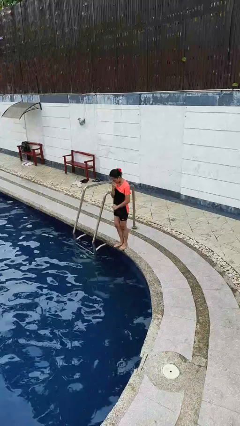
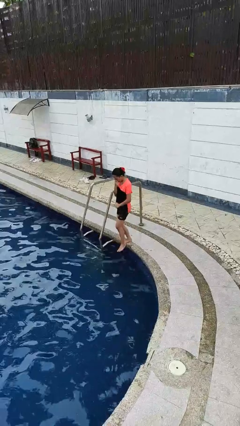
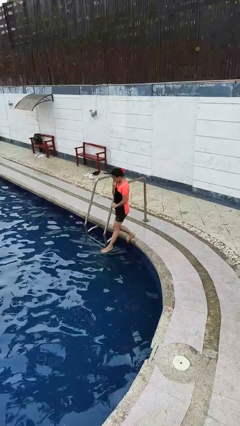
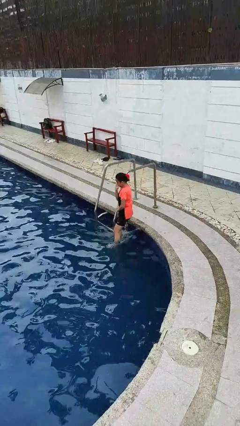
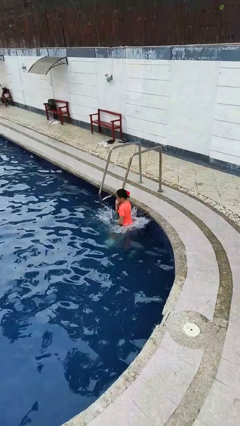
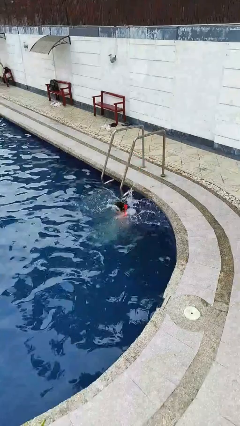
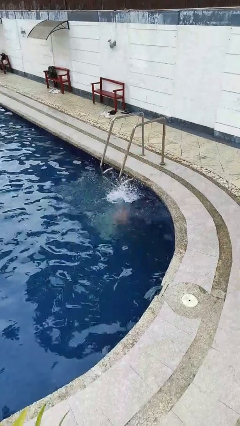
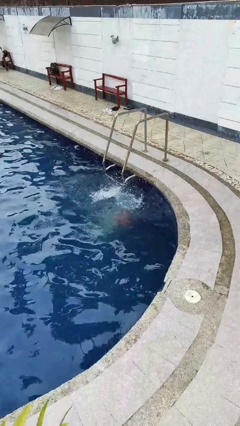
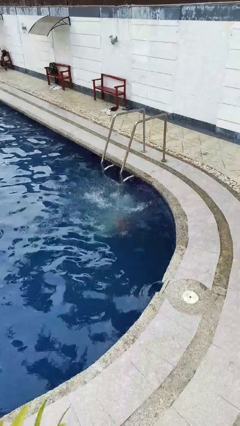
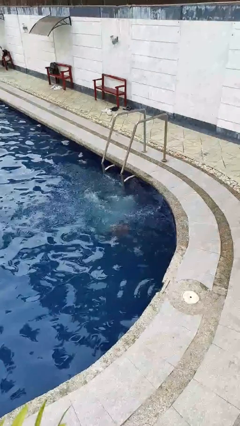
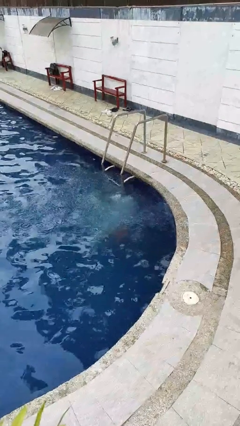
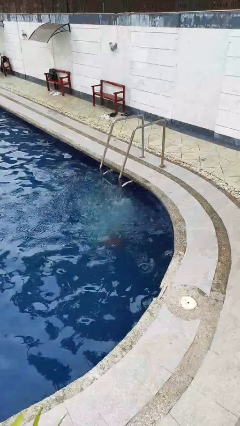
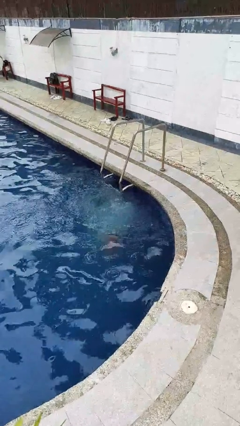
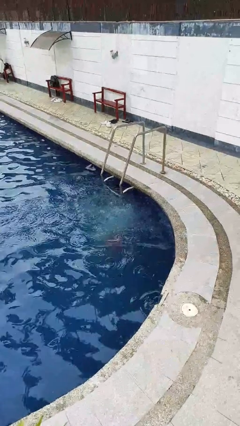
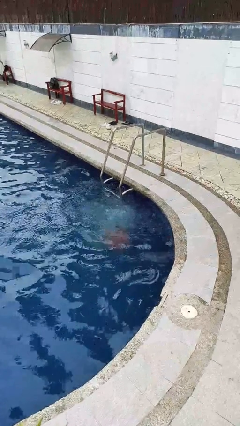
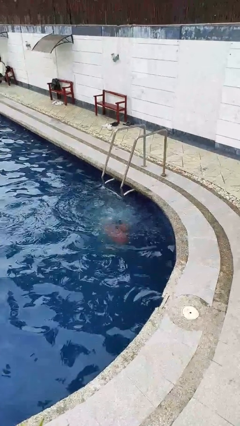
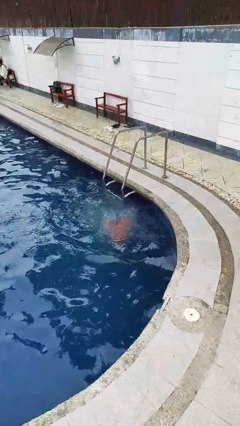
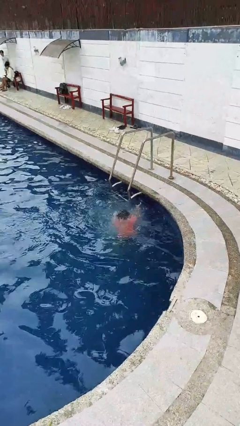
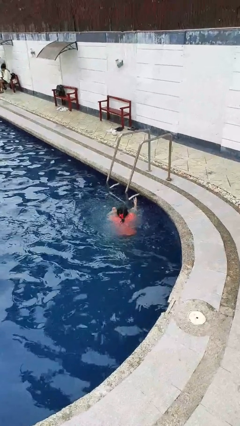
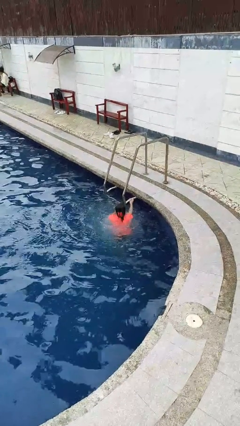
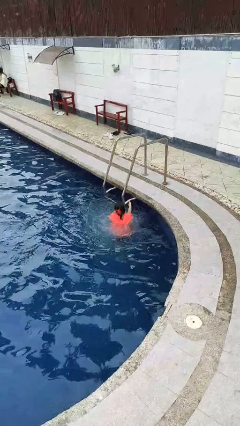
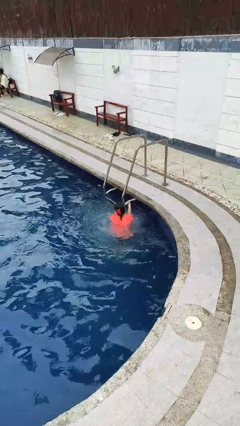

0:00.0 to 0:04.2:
person jumps into pool

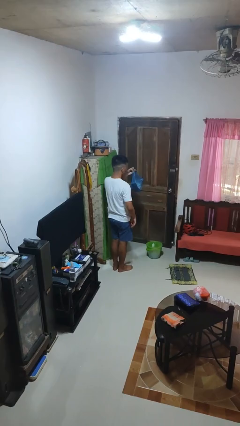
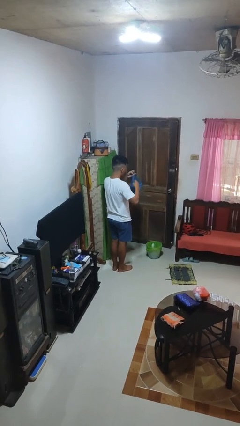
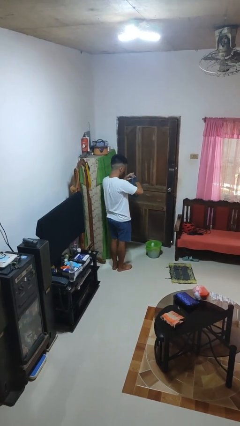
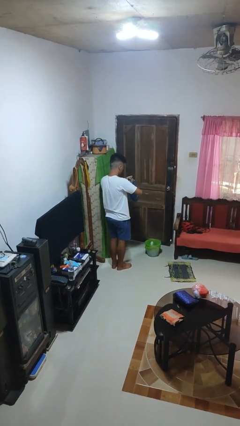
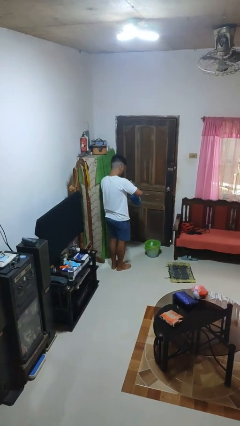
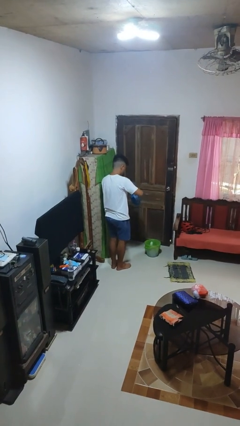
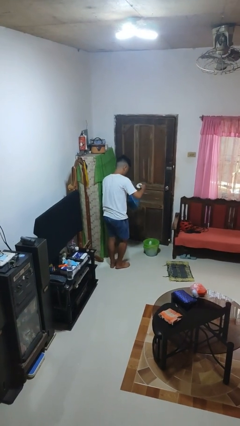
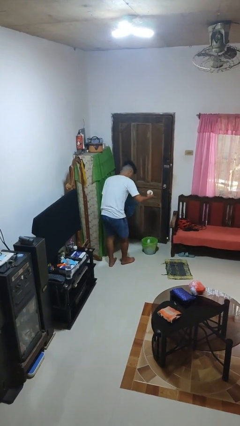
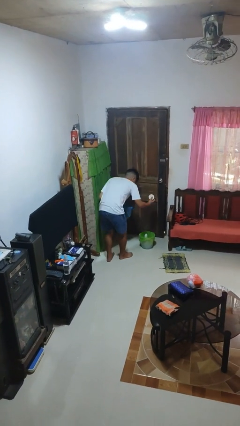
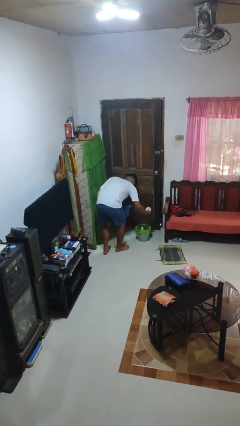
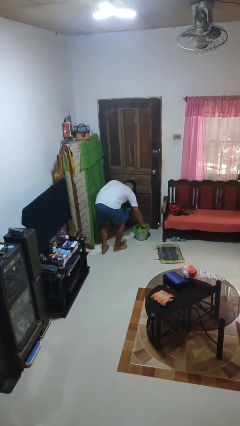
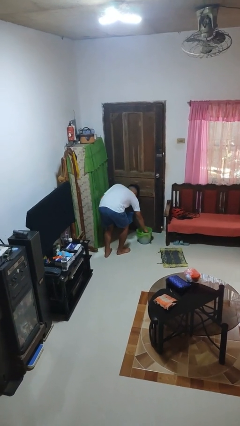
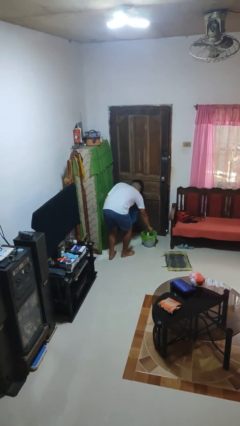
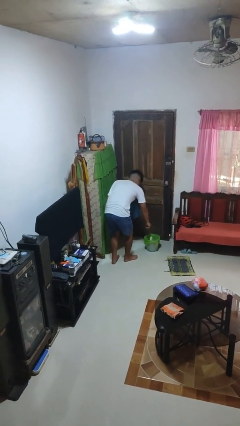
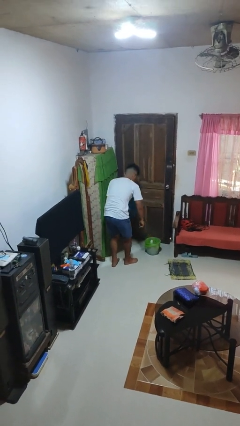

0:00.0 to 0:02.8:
person discards trash

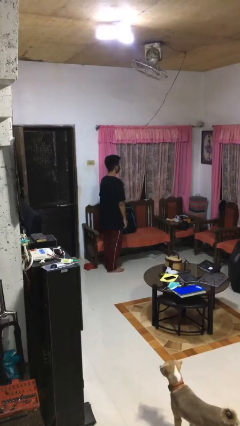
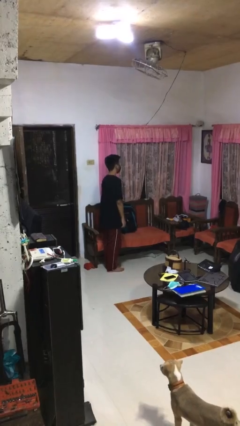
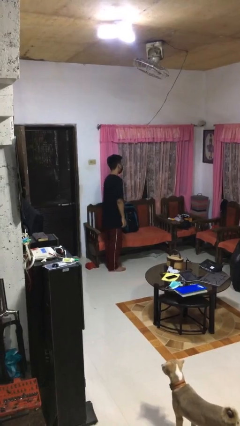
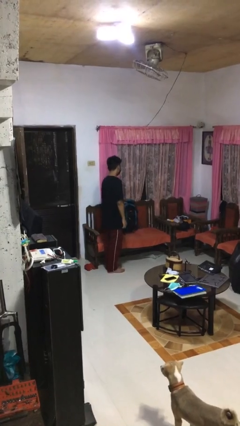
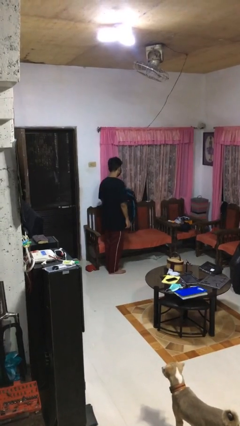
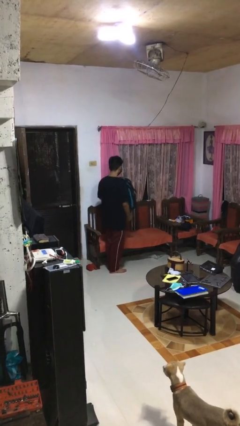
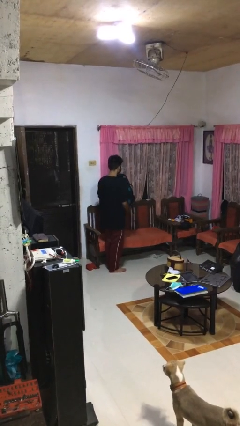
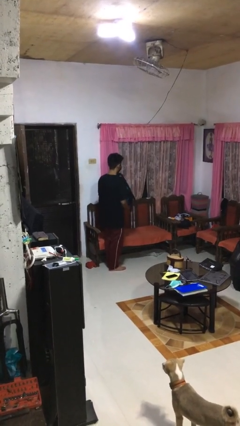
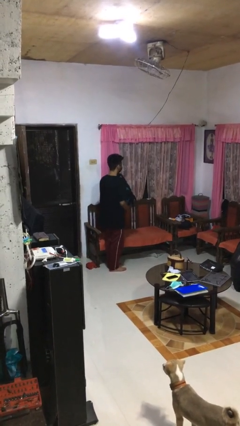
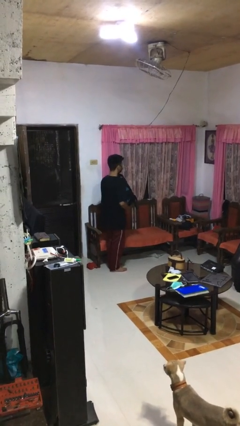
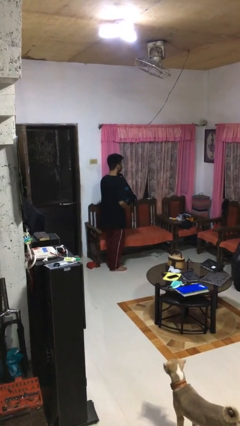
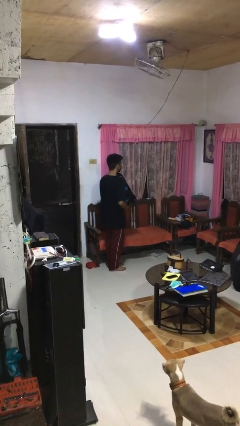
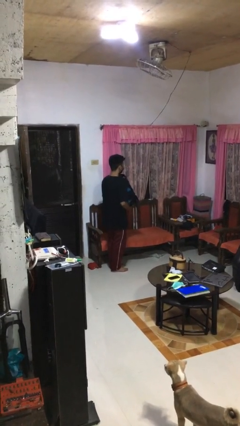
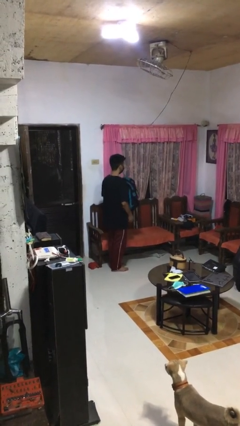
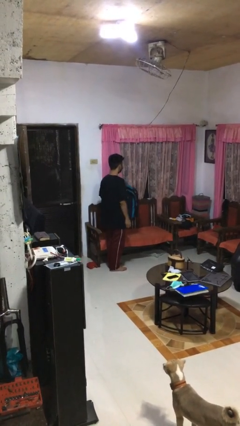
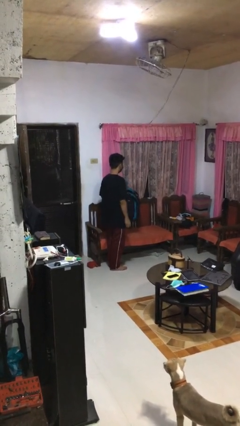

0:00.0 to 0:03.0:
person picks up object from couch

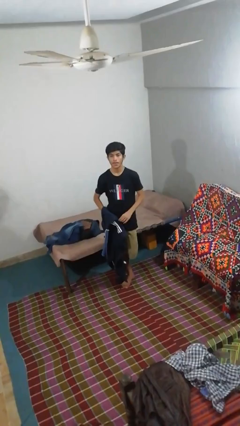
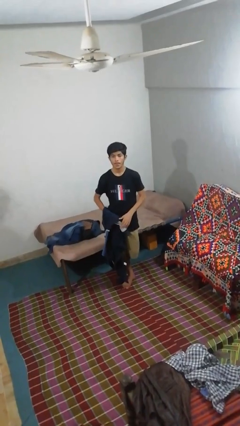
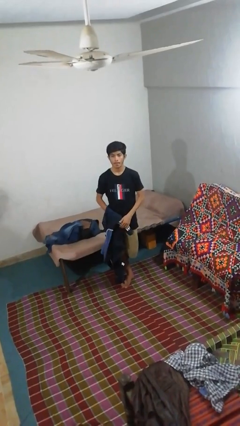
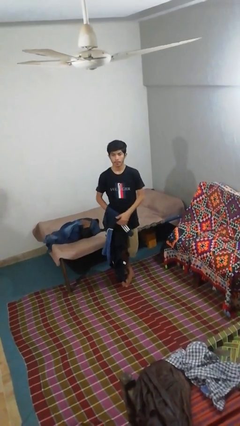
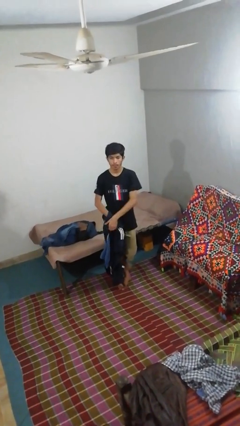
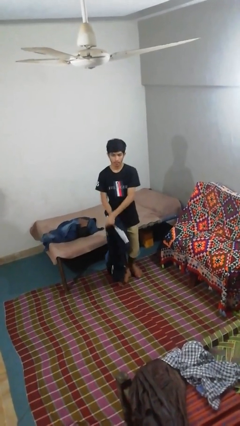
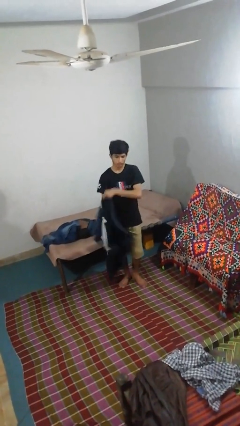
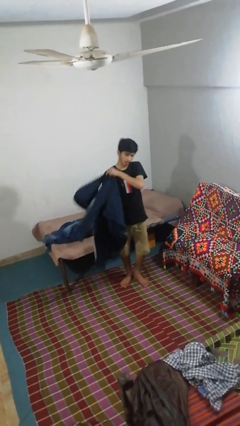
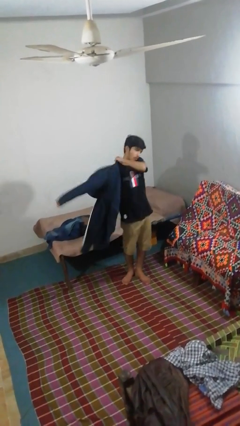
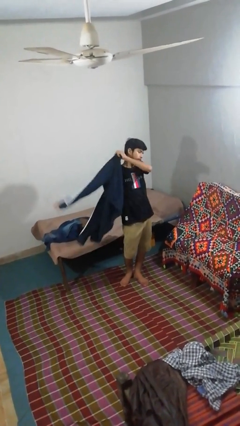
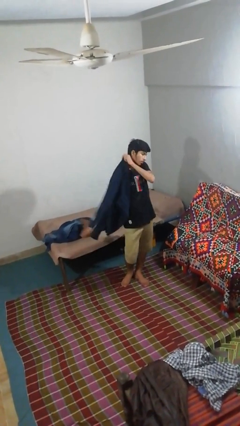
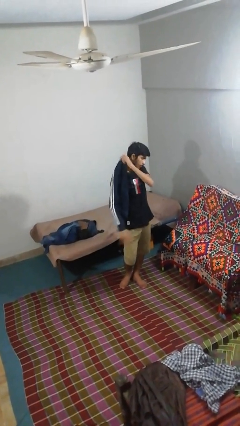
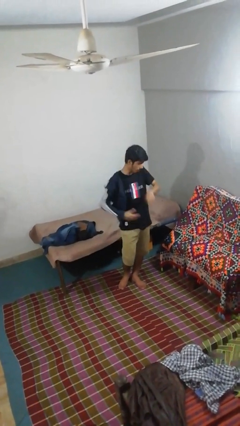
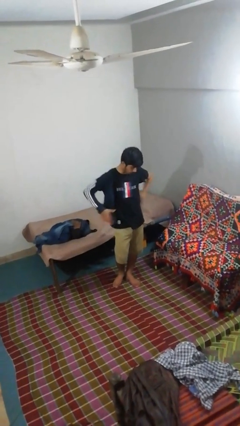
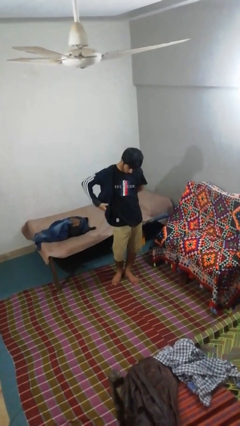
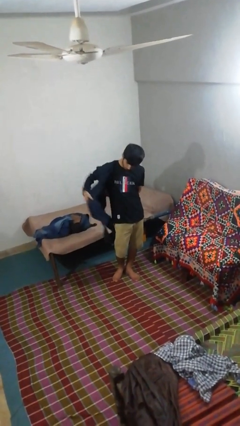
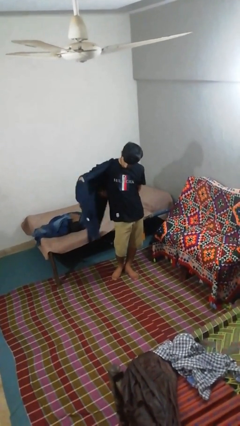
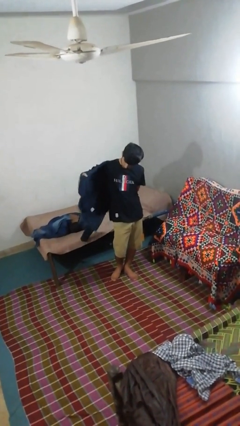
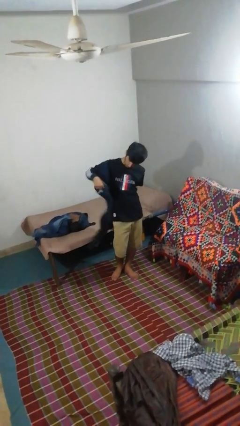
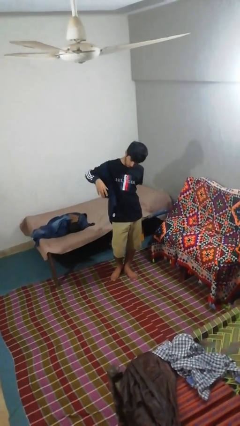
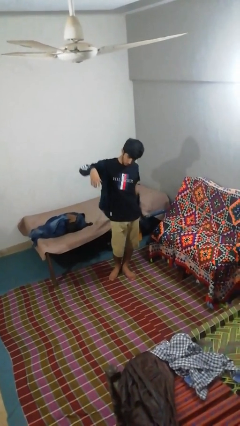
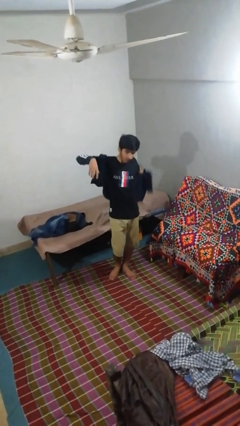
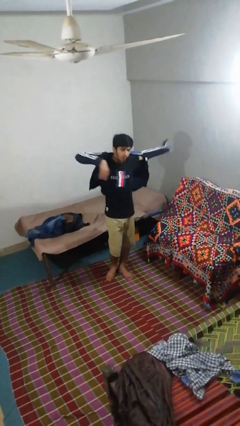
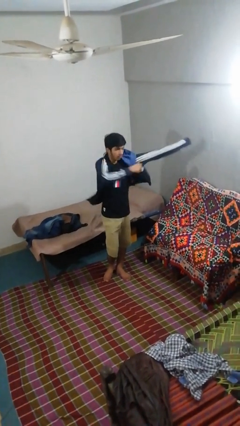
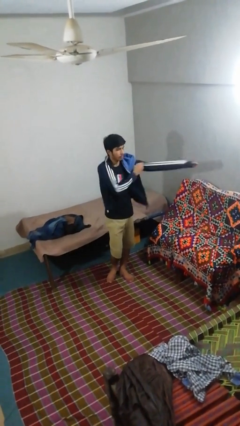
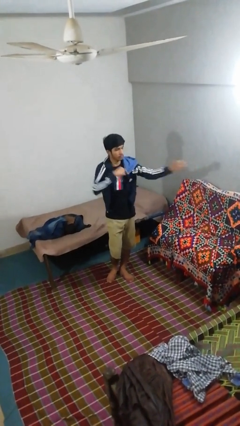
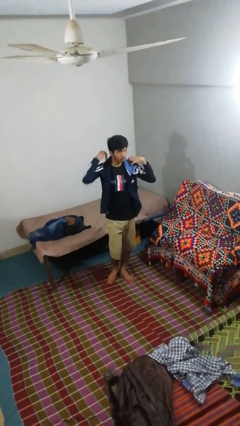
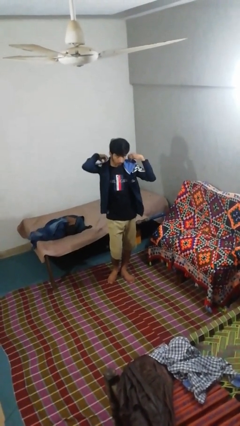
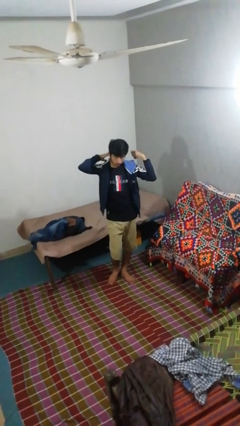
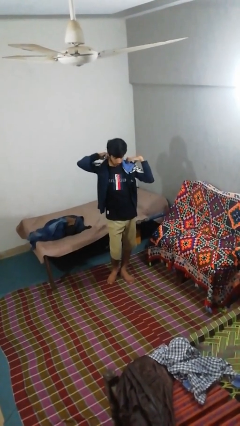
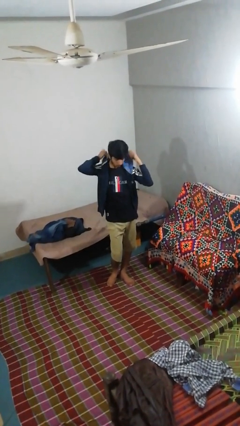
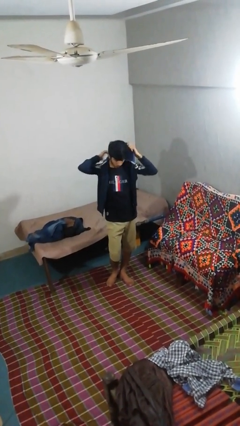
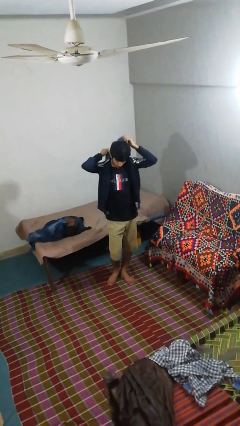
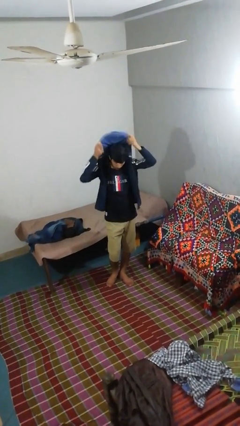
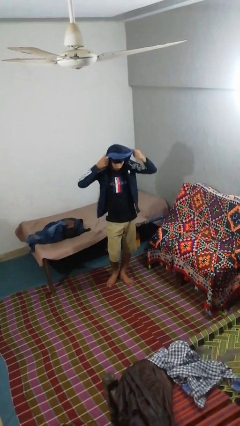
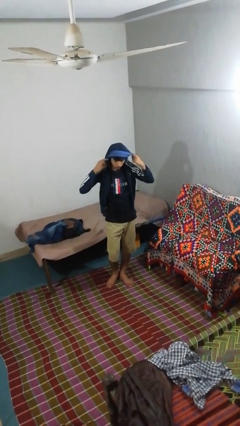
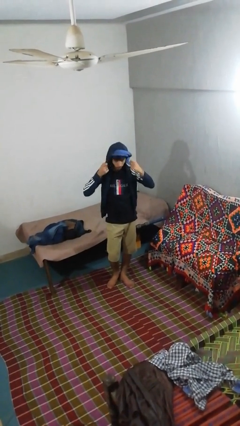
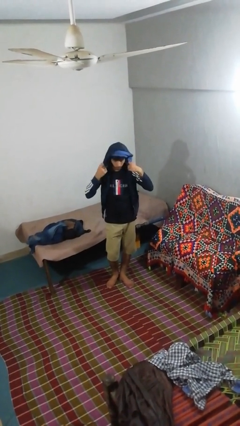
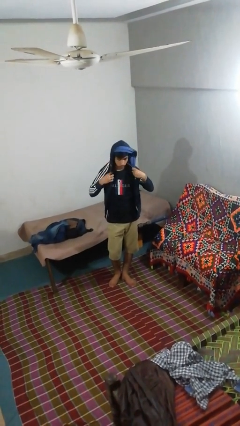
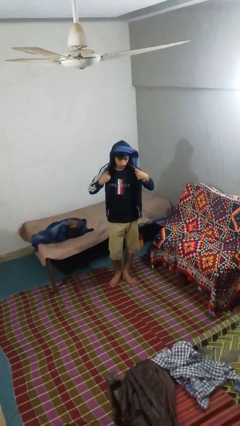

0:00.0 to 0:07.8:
person puts on hoodie
